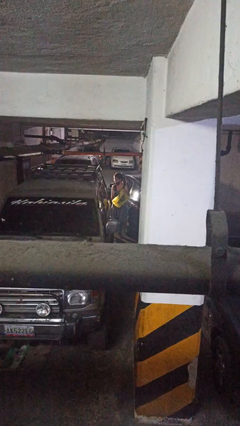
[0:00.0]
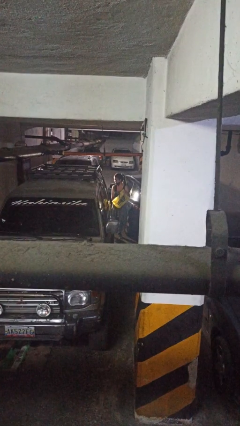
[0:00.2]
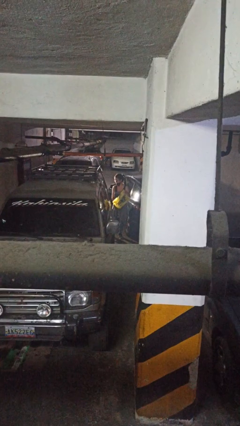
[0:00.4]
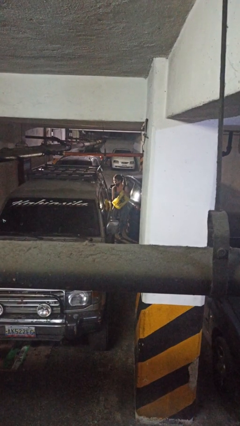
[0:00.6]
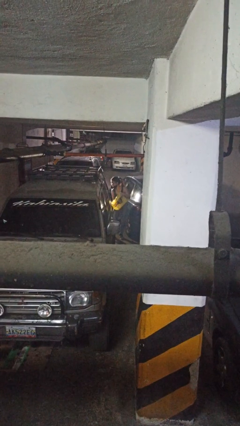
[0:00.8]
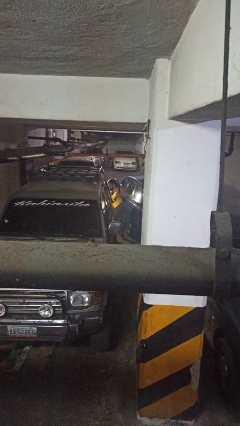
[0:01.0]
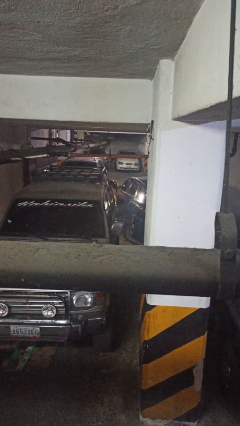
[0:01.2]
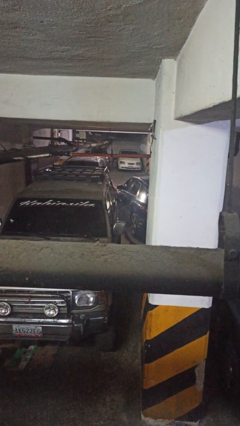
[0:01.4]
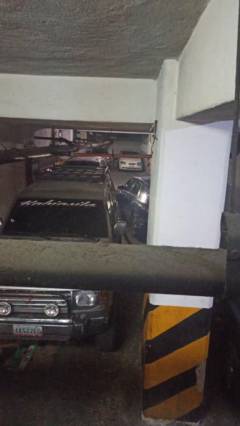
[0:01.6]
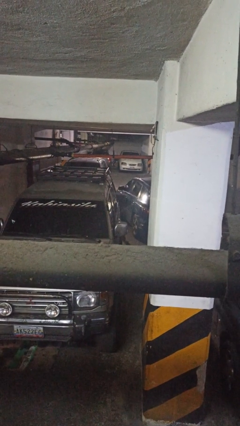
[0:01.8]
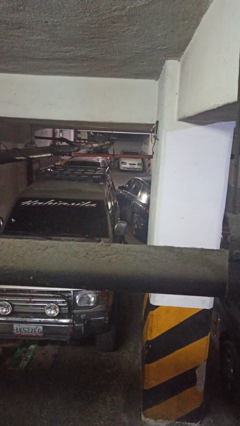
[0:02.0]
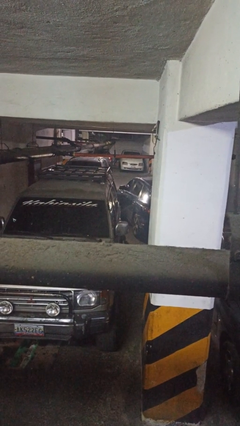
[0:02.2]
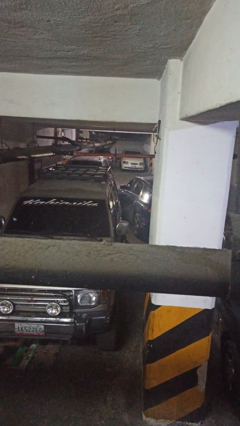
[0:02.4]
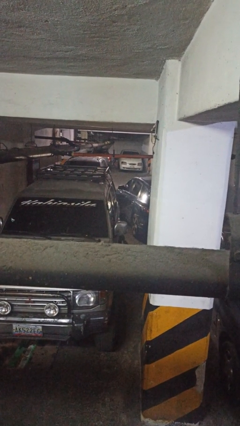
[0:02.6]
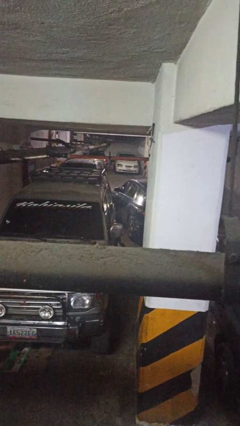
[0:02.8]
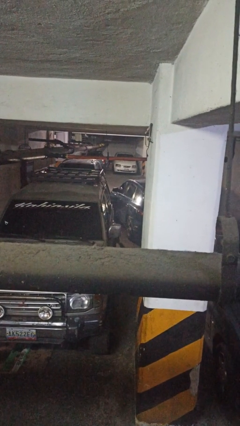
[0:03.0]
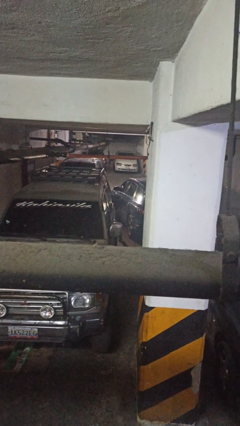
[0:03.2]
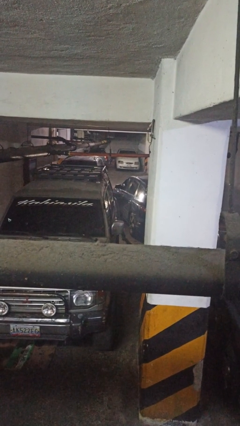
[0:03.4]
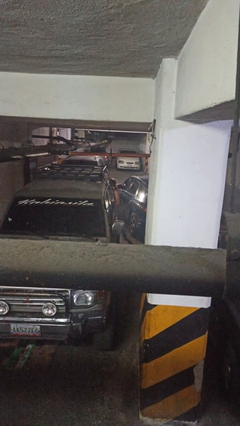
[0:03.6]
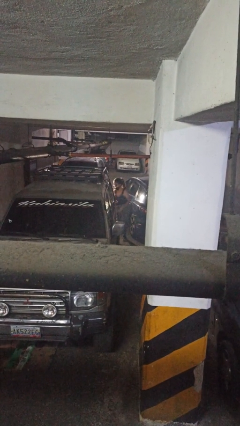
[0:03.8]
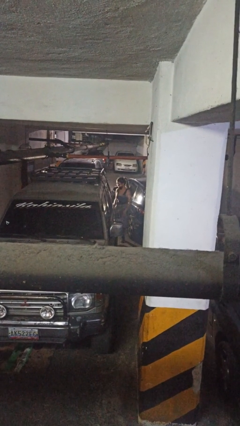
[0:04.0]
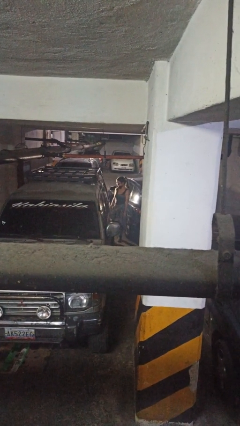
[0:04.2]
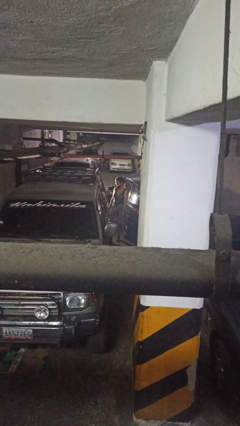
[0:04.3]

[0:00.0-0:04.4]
person loads car

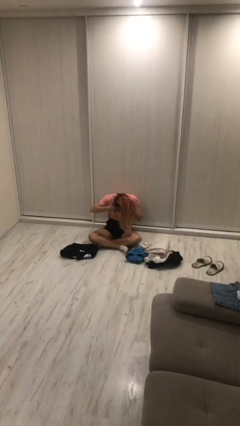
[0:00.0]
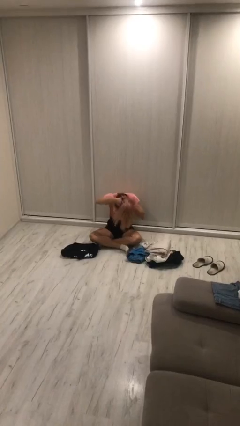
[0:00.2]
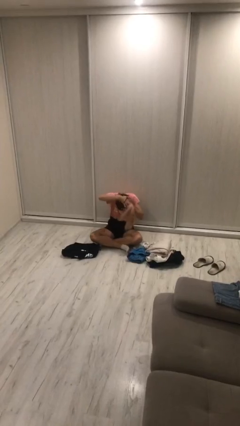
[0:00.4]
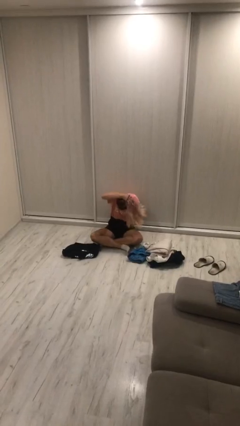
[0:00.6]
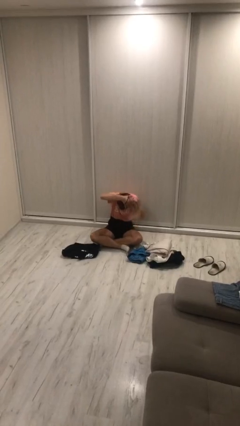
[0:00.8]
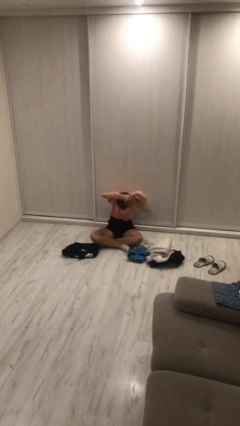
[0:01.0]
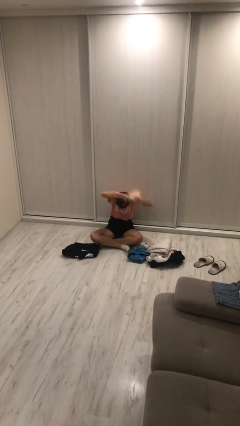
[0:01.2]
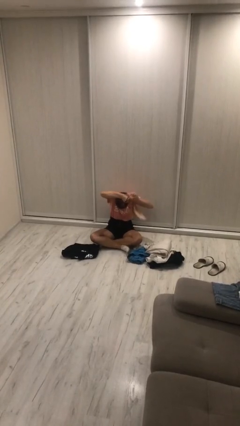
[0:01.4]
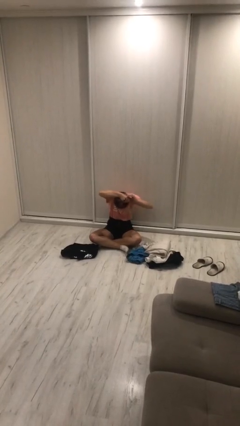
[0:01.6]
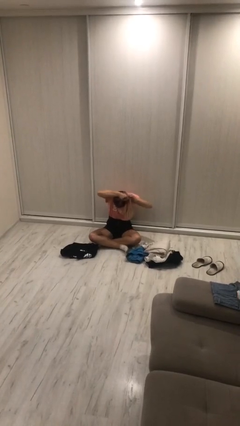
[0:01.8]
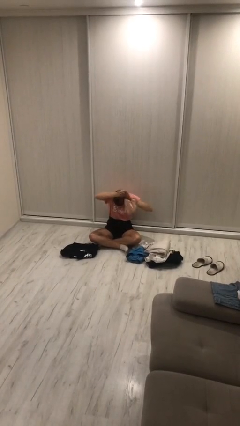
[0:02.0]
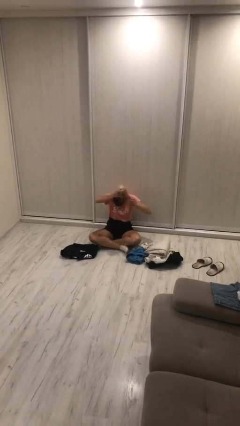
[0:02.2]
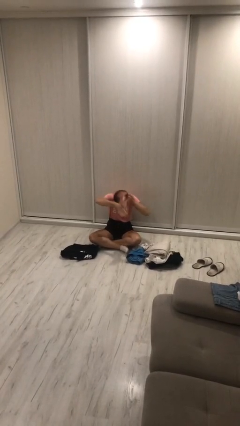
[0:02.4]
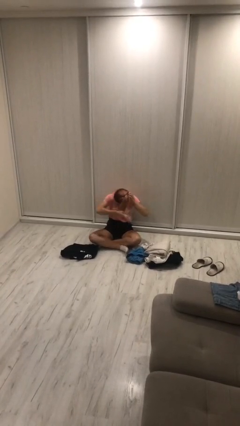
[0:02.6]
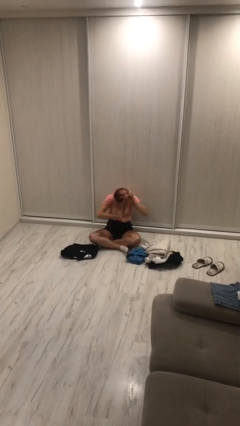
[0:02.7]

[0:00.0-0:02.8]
person puts hair in ponytail

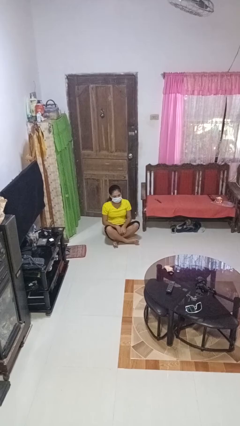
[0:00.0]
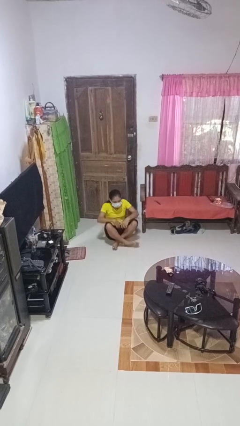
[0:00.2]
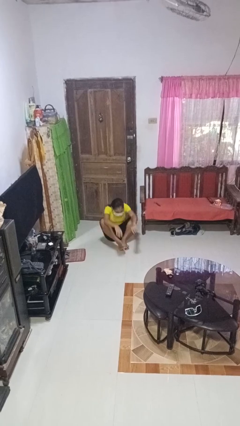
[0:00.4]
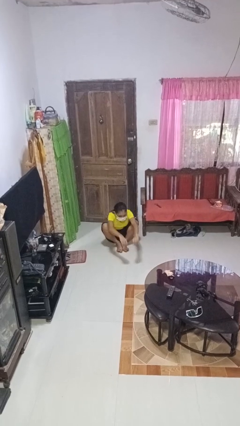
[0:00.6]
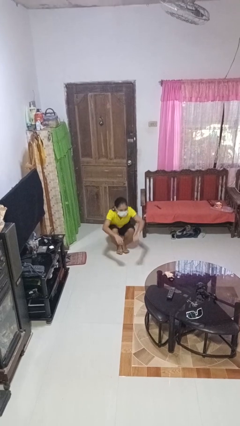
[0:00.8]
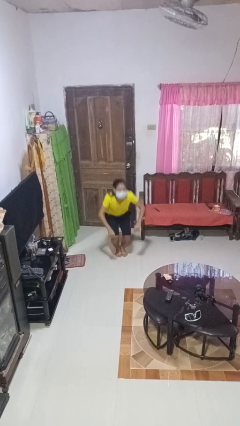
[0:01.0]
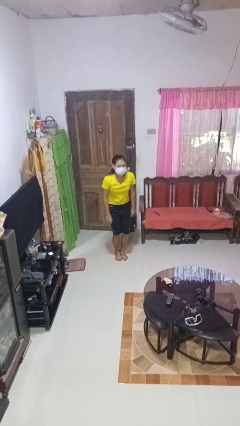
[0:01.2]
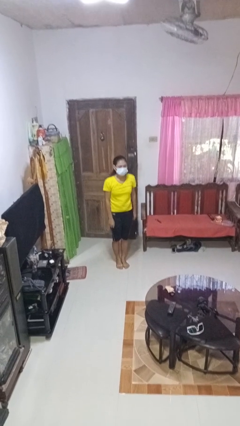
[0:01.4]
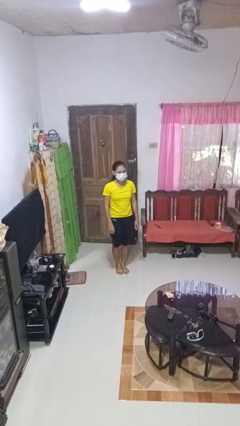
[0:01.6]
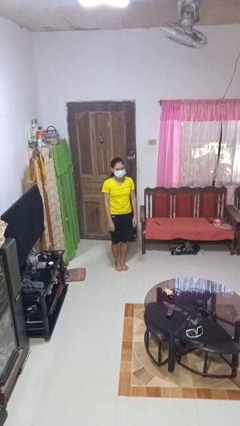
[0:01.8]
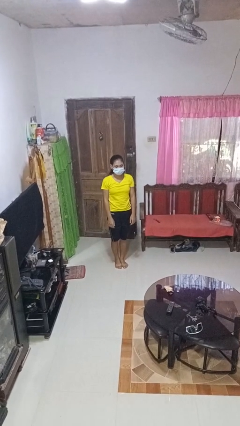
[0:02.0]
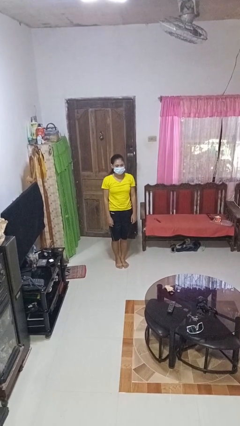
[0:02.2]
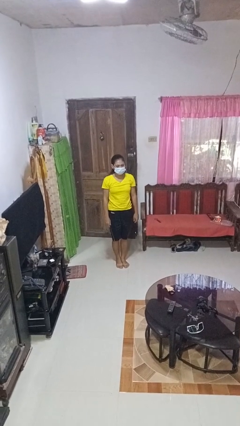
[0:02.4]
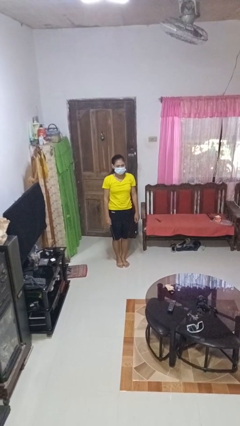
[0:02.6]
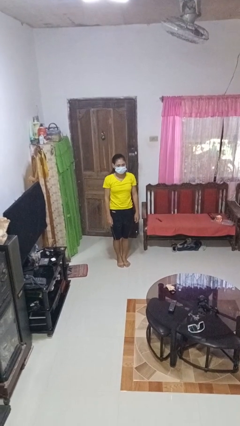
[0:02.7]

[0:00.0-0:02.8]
person stands up from floor

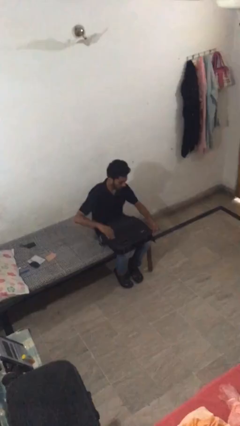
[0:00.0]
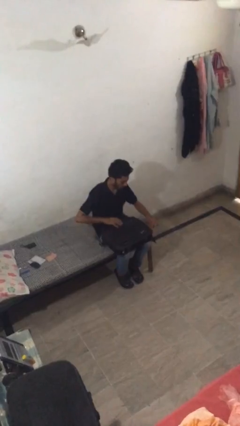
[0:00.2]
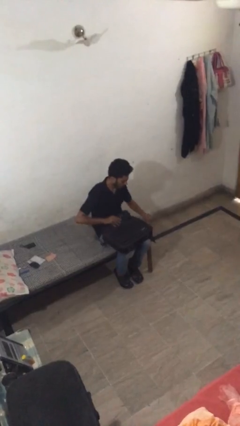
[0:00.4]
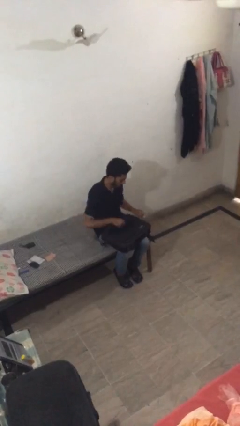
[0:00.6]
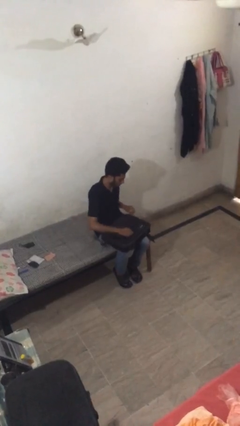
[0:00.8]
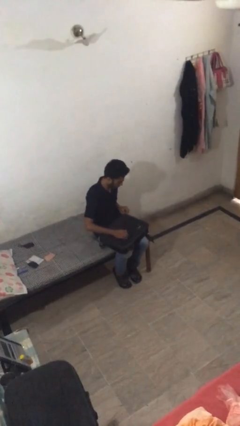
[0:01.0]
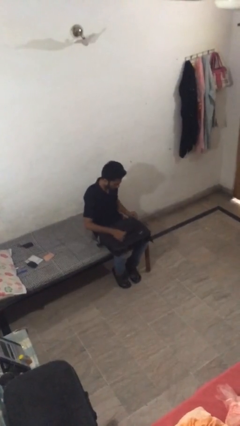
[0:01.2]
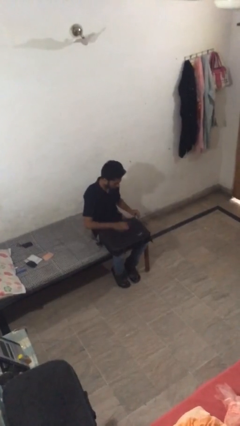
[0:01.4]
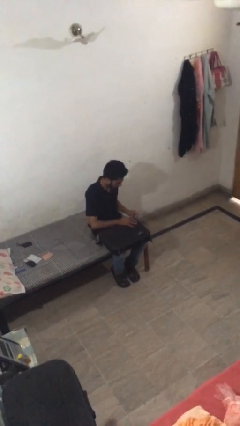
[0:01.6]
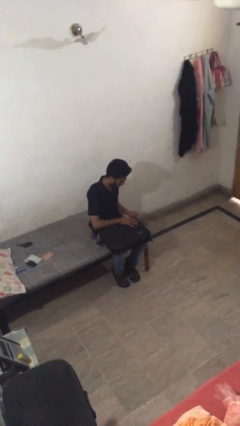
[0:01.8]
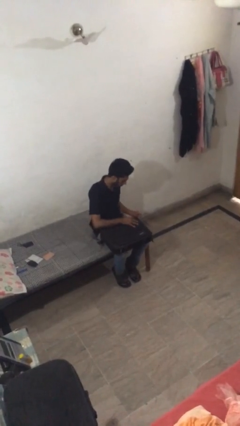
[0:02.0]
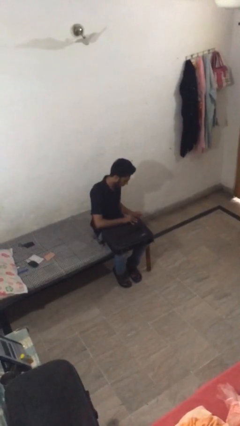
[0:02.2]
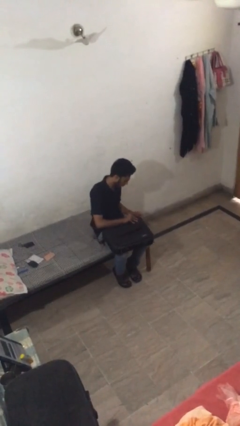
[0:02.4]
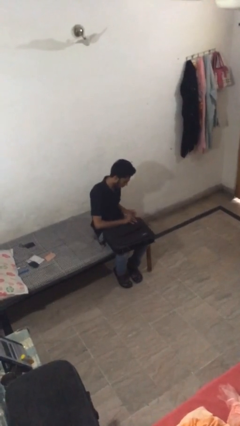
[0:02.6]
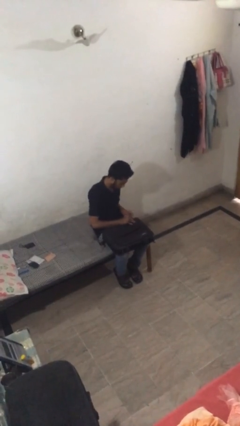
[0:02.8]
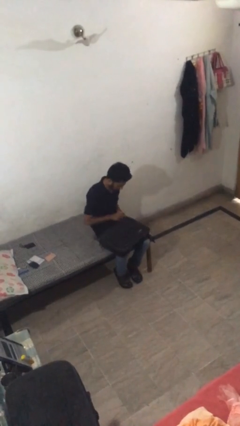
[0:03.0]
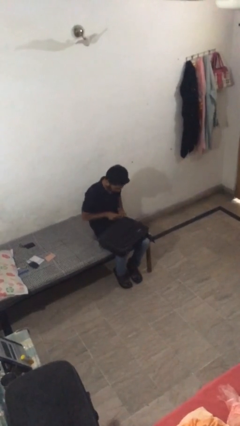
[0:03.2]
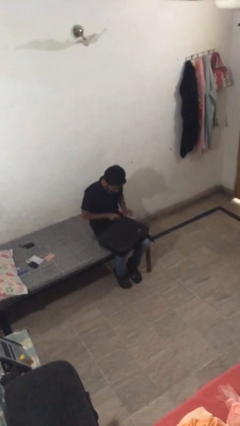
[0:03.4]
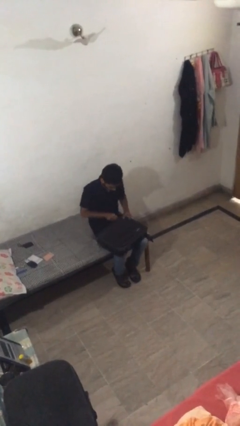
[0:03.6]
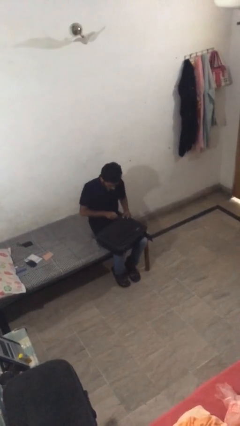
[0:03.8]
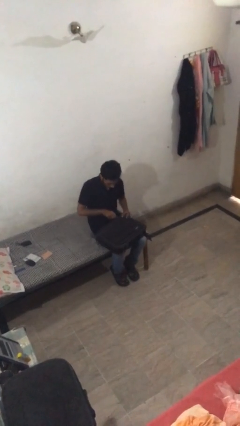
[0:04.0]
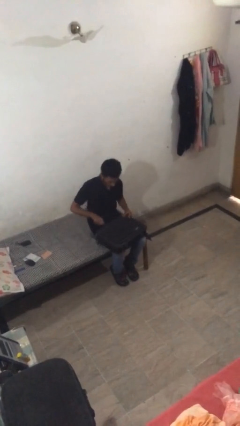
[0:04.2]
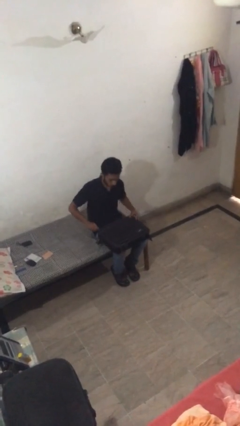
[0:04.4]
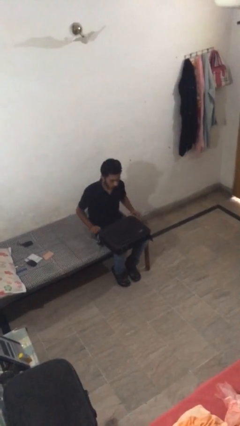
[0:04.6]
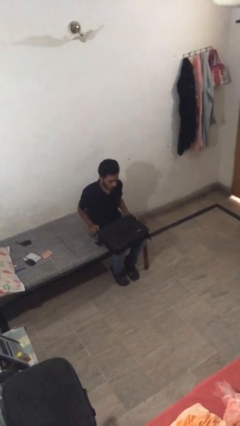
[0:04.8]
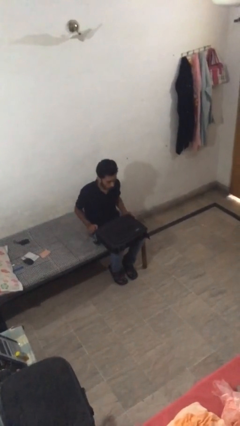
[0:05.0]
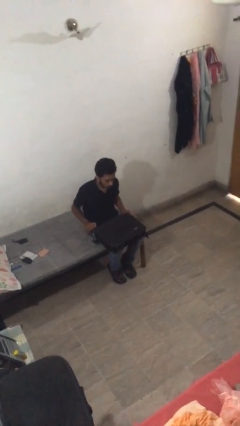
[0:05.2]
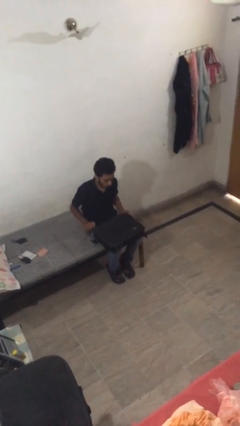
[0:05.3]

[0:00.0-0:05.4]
person closes suitcase

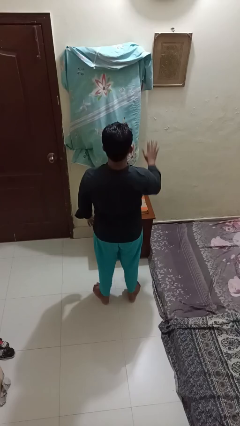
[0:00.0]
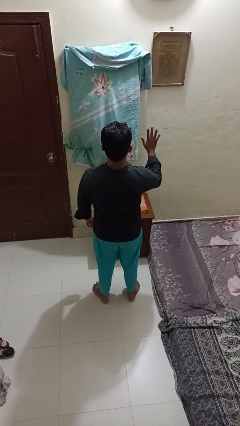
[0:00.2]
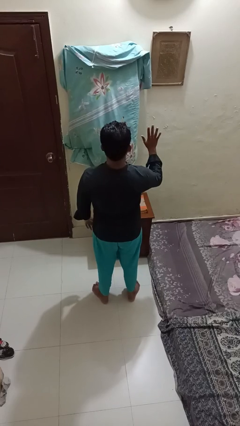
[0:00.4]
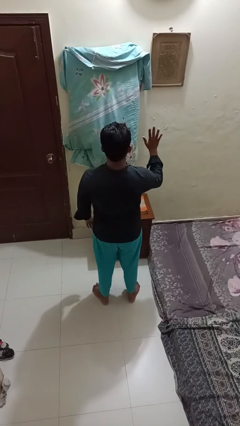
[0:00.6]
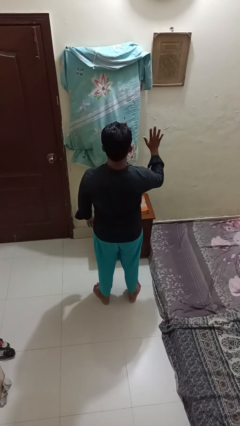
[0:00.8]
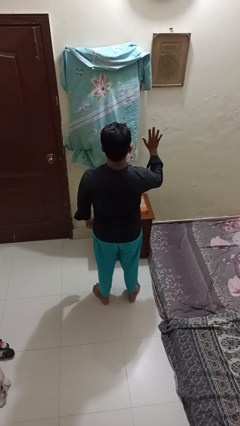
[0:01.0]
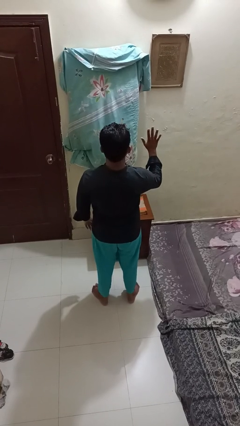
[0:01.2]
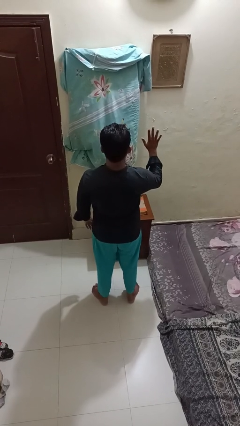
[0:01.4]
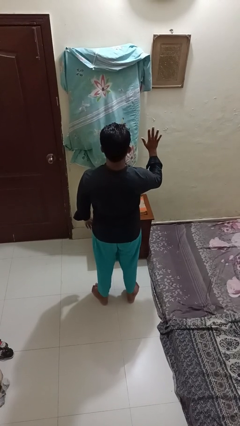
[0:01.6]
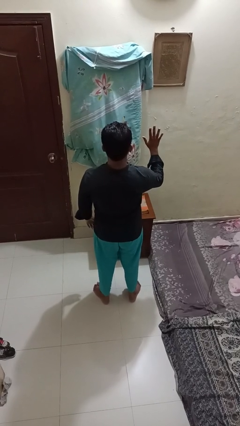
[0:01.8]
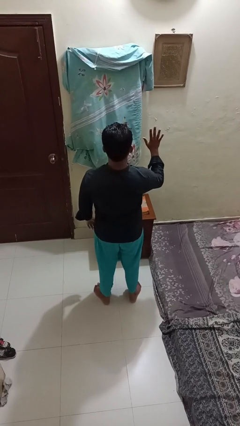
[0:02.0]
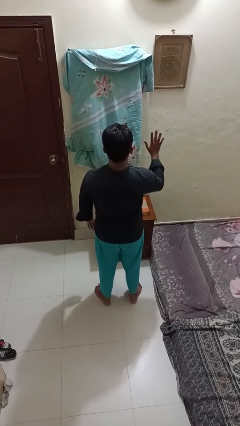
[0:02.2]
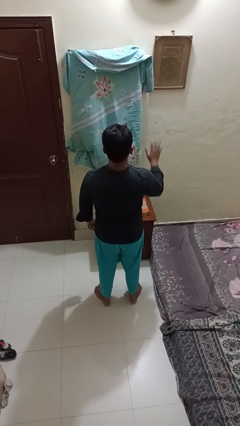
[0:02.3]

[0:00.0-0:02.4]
person gestures number five
